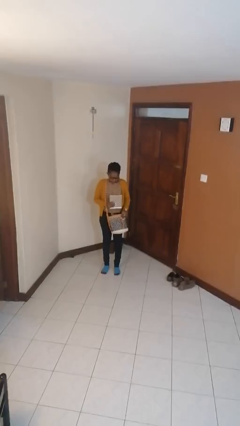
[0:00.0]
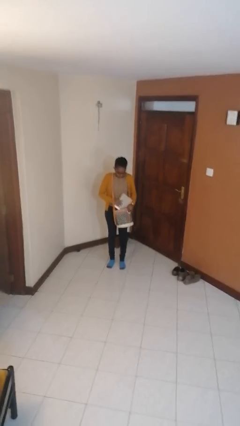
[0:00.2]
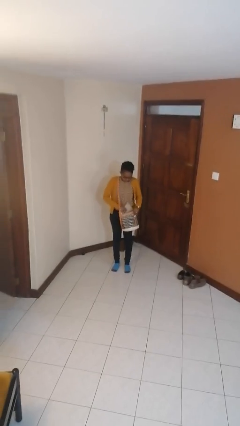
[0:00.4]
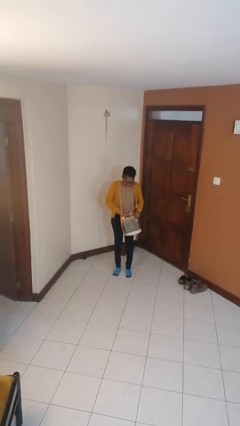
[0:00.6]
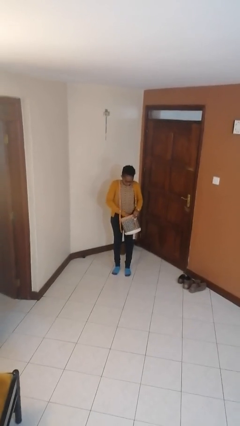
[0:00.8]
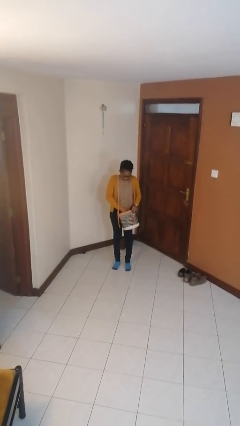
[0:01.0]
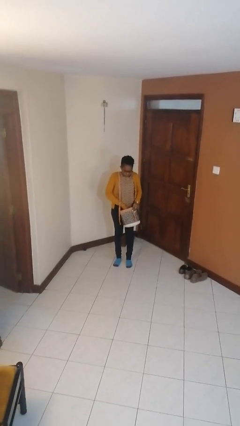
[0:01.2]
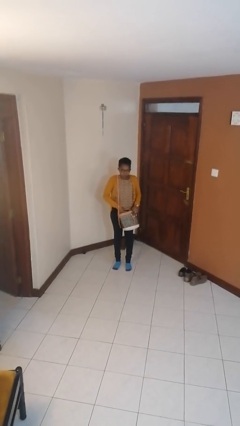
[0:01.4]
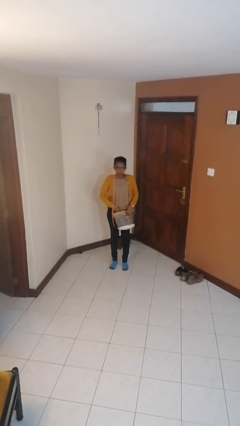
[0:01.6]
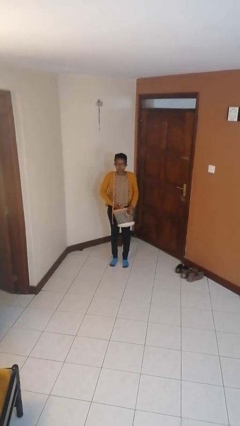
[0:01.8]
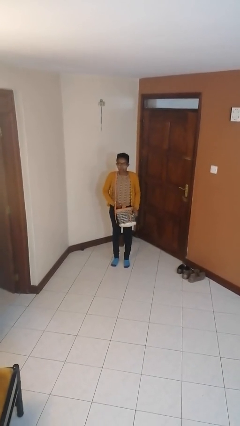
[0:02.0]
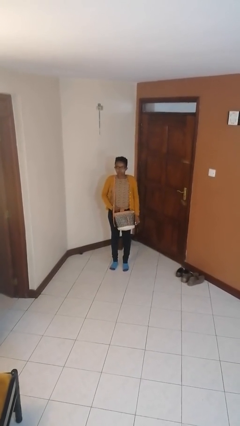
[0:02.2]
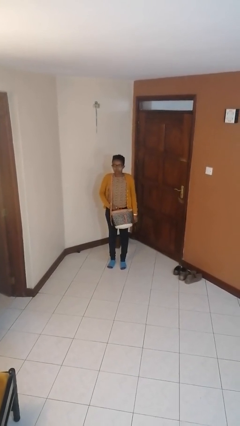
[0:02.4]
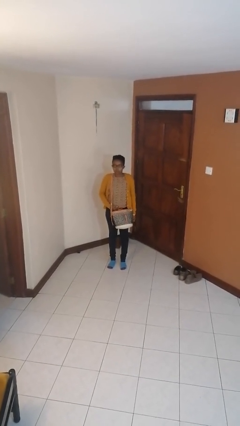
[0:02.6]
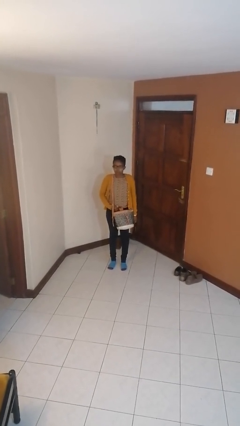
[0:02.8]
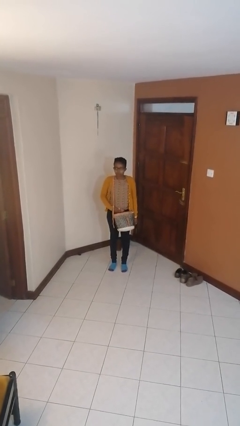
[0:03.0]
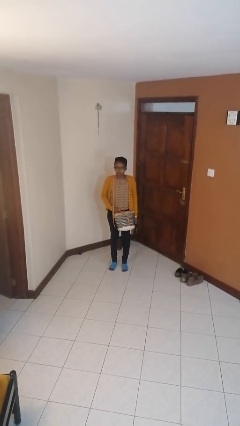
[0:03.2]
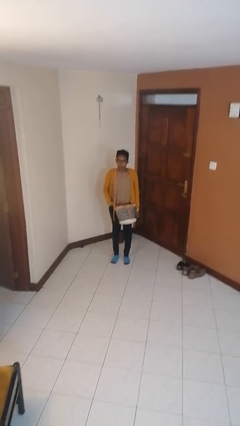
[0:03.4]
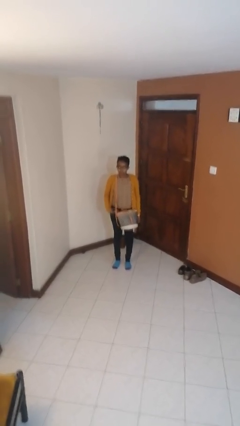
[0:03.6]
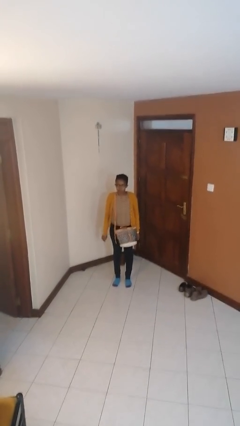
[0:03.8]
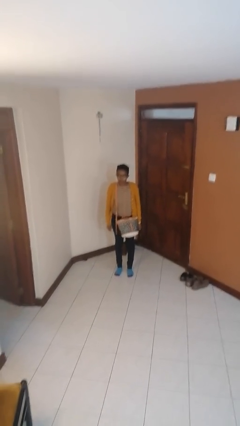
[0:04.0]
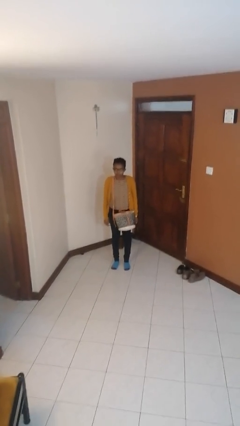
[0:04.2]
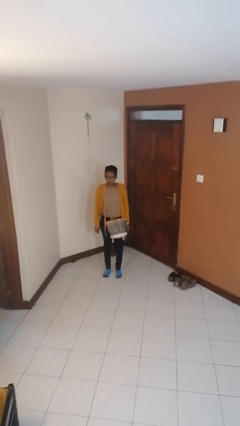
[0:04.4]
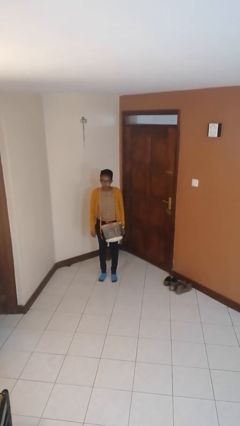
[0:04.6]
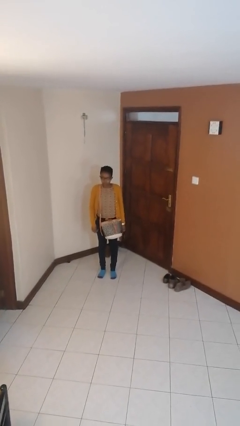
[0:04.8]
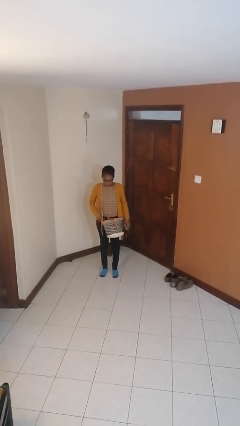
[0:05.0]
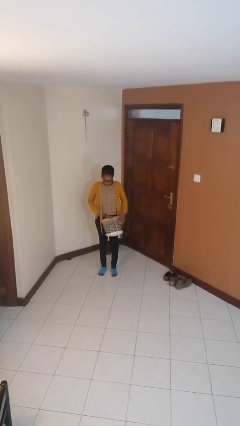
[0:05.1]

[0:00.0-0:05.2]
person puts object into purse

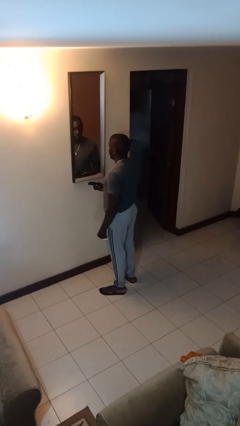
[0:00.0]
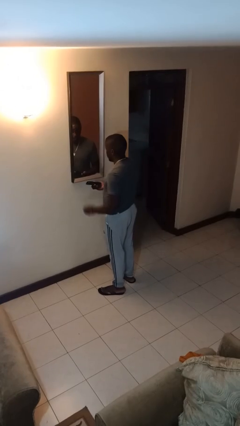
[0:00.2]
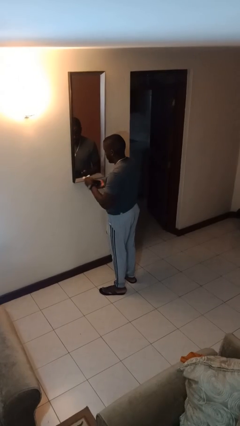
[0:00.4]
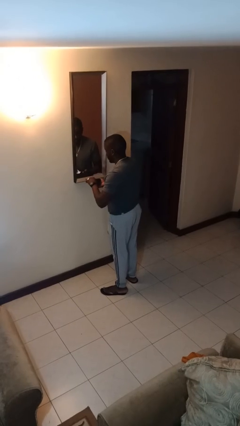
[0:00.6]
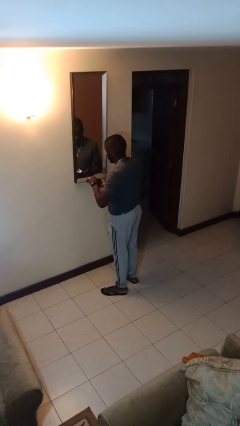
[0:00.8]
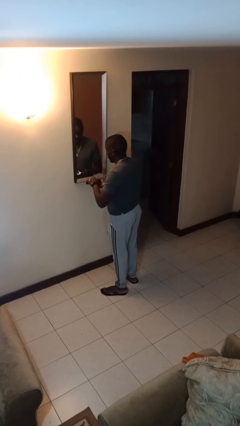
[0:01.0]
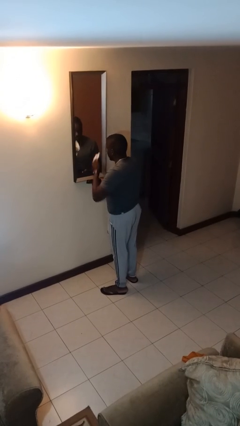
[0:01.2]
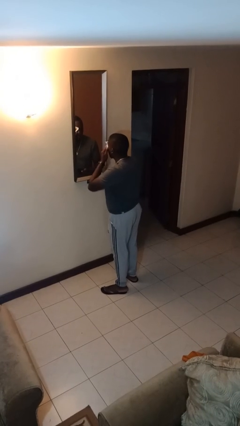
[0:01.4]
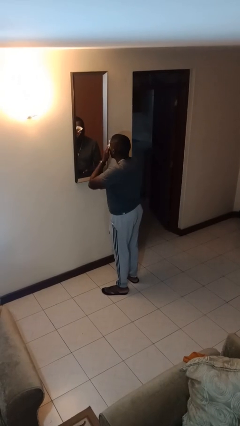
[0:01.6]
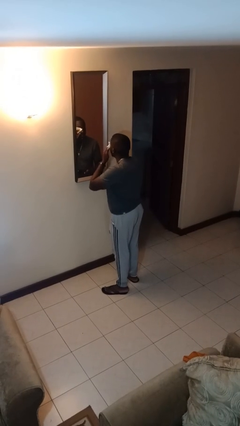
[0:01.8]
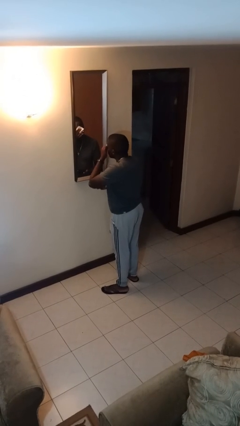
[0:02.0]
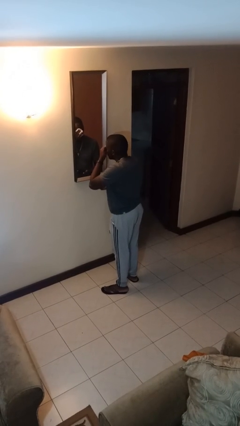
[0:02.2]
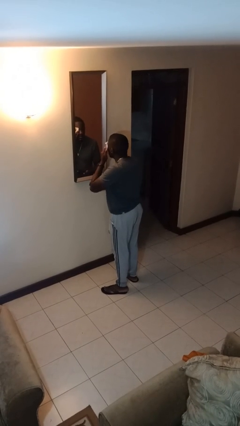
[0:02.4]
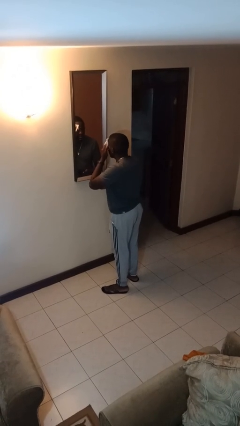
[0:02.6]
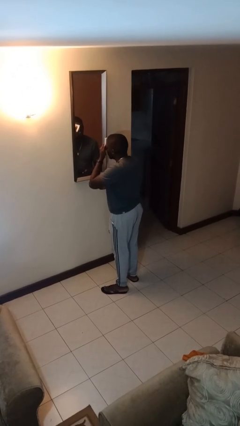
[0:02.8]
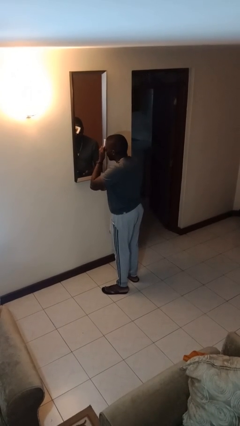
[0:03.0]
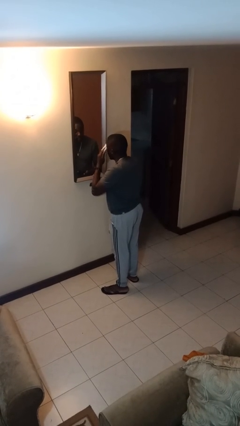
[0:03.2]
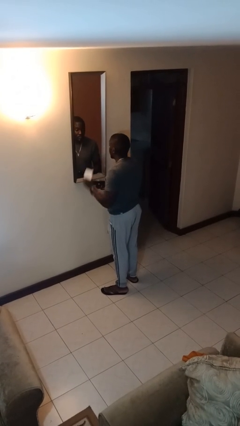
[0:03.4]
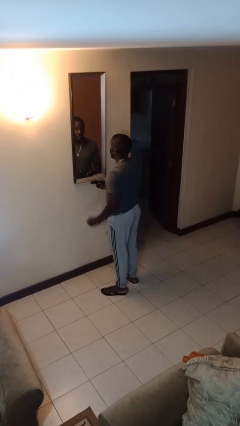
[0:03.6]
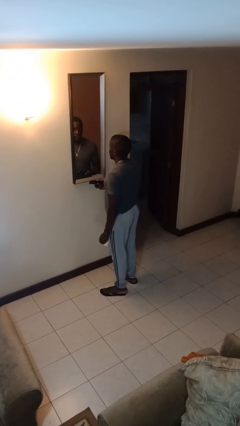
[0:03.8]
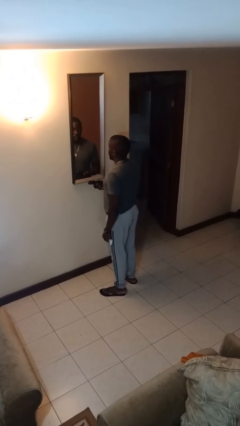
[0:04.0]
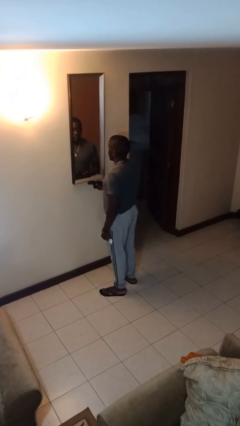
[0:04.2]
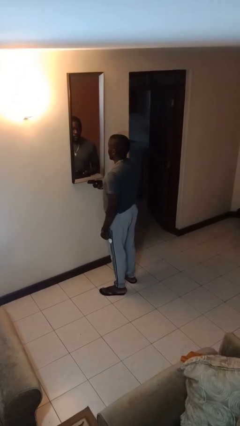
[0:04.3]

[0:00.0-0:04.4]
person applies foundation makeup

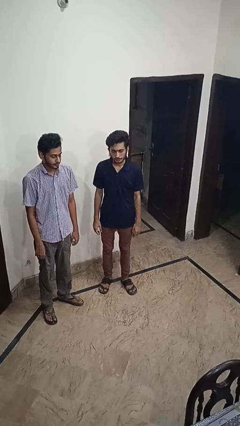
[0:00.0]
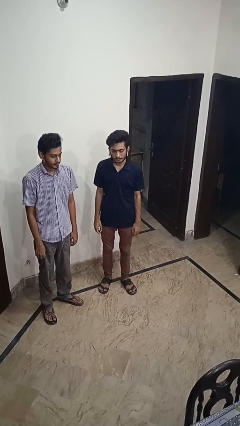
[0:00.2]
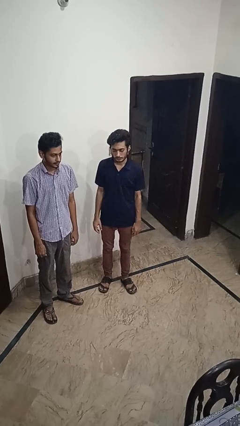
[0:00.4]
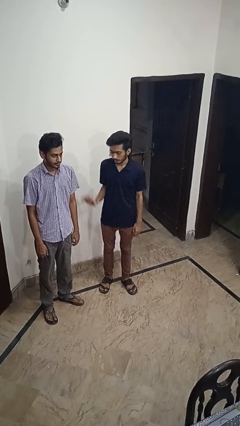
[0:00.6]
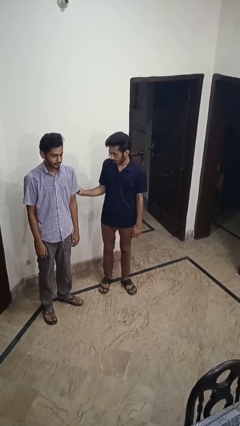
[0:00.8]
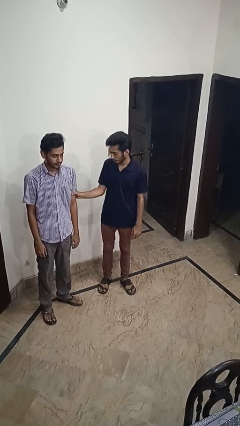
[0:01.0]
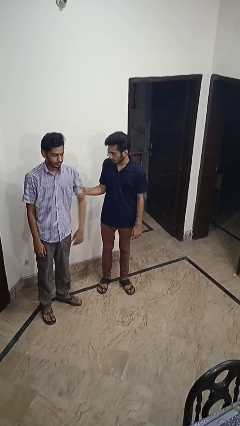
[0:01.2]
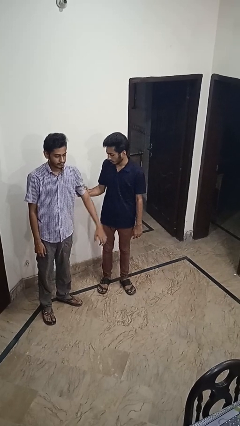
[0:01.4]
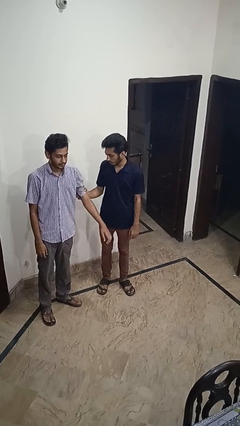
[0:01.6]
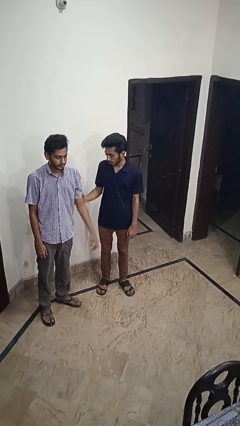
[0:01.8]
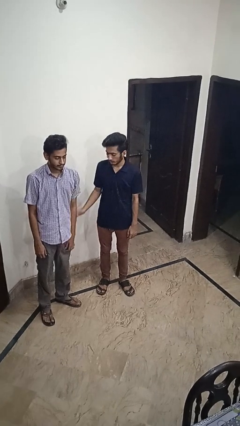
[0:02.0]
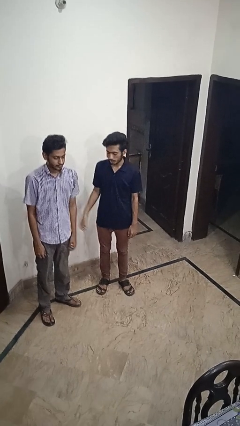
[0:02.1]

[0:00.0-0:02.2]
person grabs person by bicep

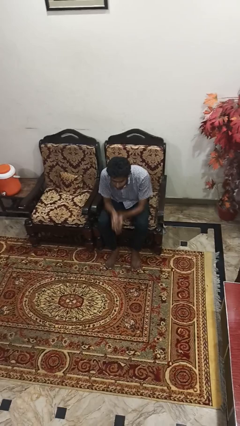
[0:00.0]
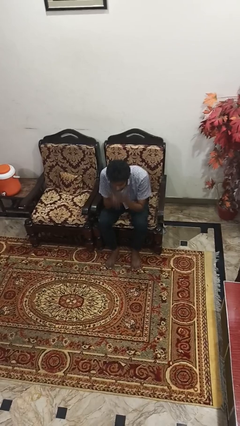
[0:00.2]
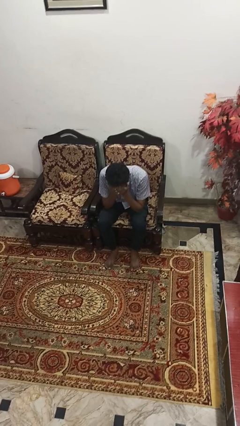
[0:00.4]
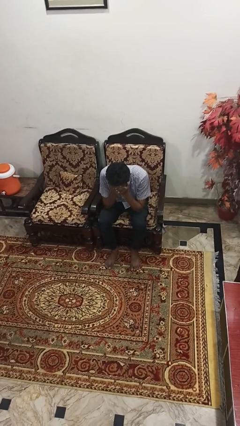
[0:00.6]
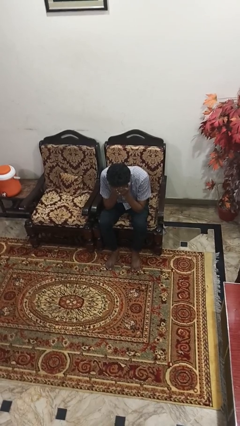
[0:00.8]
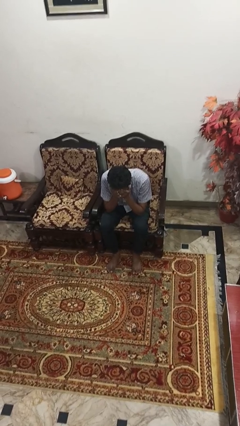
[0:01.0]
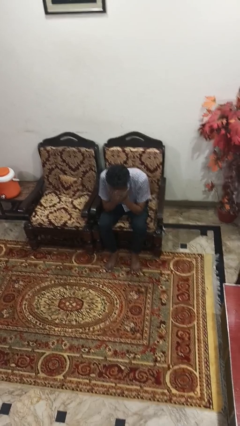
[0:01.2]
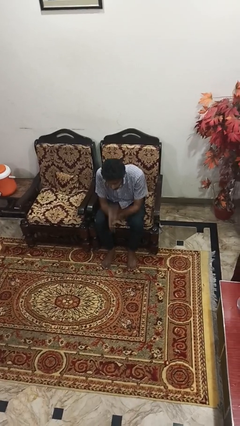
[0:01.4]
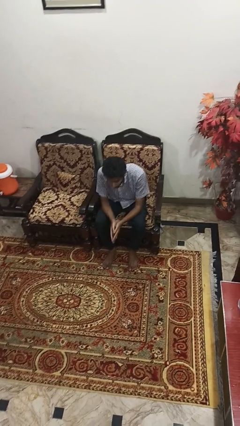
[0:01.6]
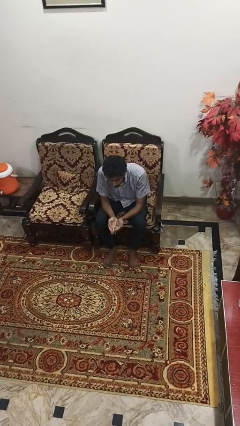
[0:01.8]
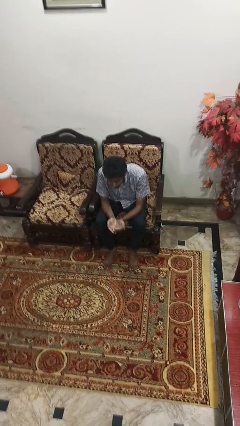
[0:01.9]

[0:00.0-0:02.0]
person covers face with hands

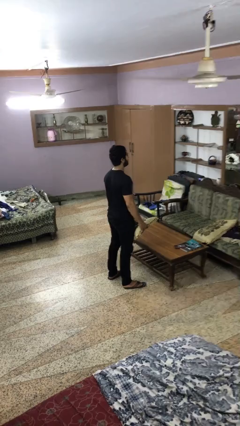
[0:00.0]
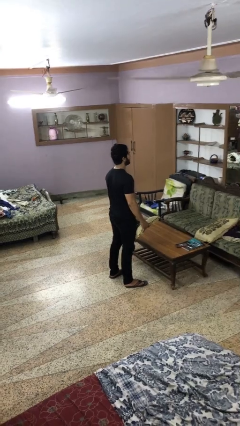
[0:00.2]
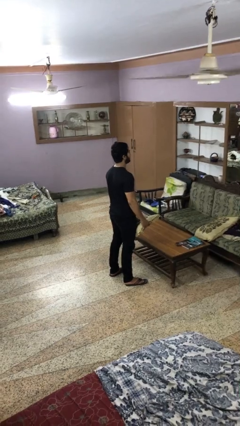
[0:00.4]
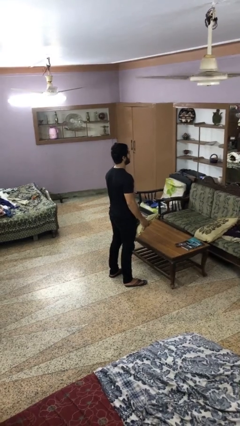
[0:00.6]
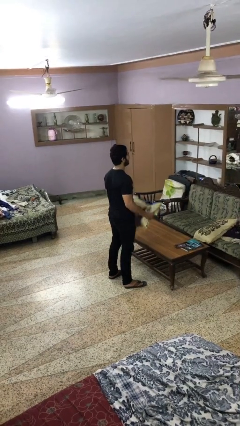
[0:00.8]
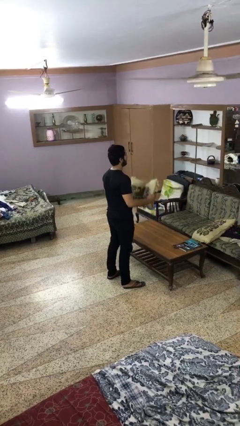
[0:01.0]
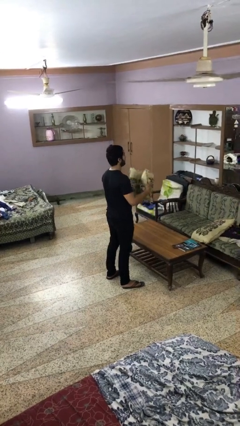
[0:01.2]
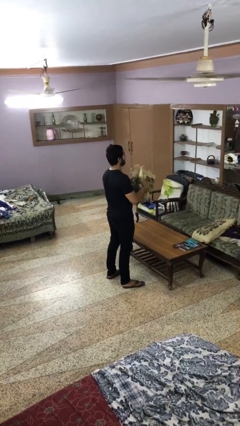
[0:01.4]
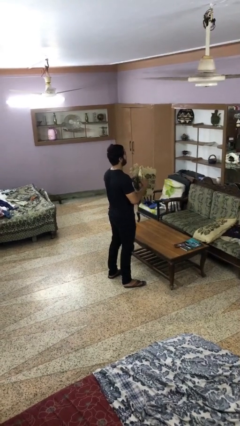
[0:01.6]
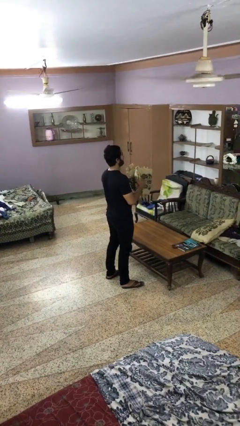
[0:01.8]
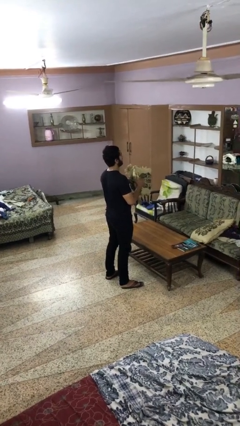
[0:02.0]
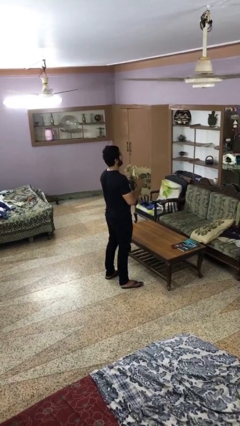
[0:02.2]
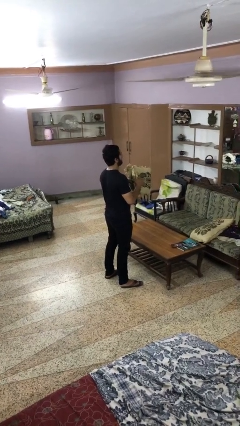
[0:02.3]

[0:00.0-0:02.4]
person squeezes object

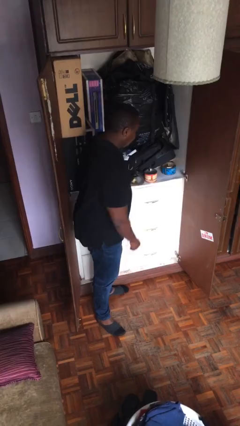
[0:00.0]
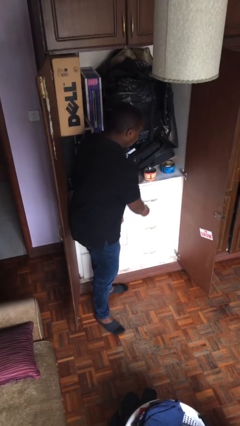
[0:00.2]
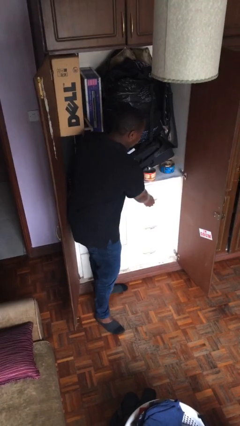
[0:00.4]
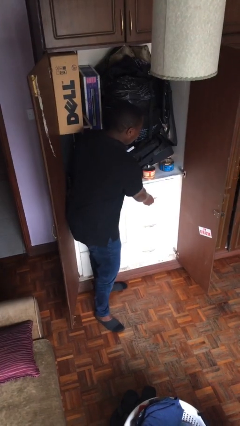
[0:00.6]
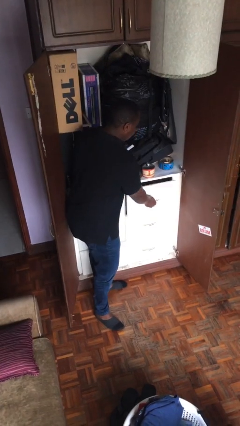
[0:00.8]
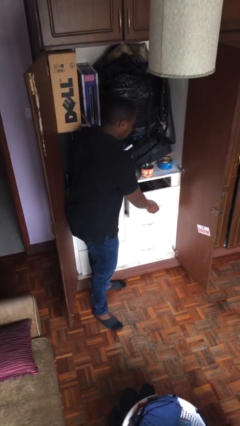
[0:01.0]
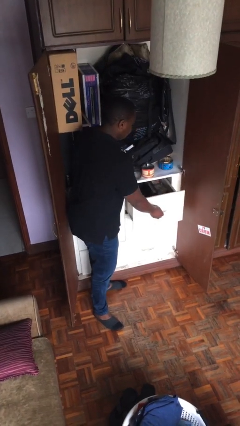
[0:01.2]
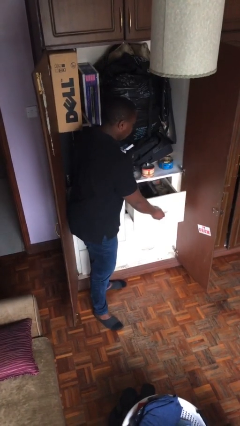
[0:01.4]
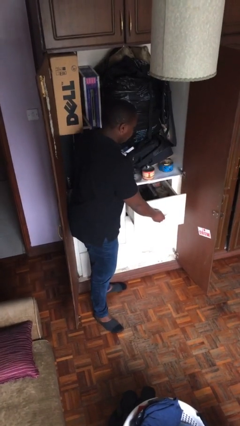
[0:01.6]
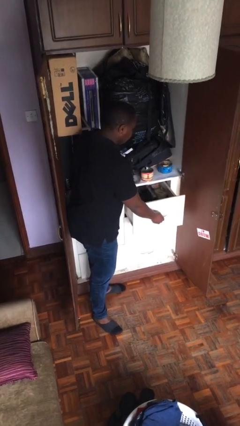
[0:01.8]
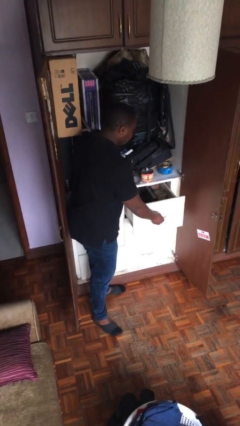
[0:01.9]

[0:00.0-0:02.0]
person opens dresser drawer
